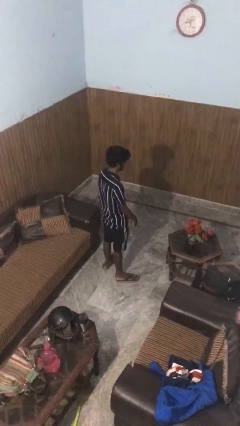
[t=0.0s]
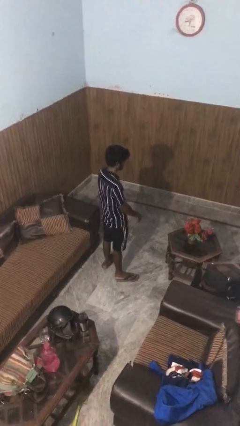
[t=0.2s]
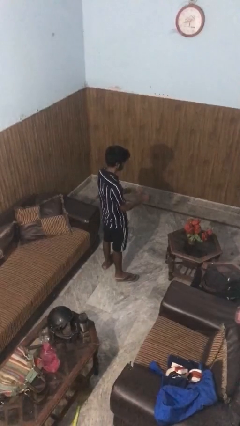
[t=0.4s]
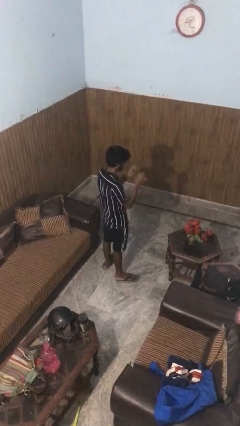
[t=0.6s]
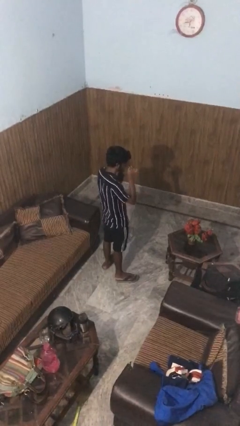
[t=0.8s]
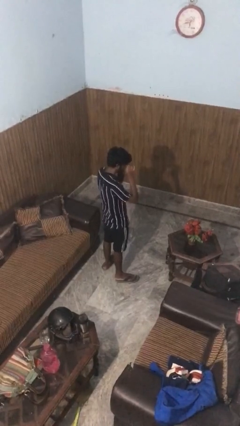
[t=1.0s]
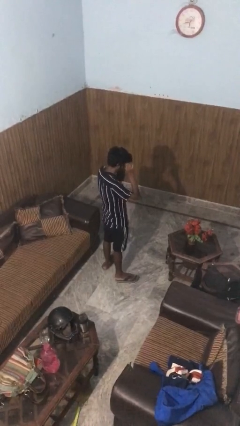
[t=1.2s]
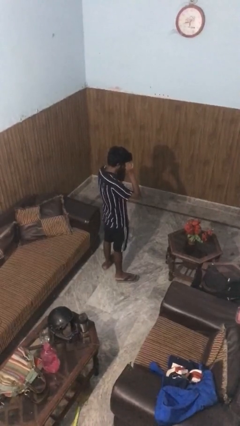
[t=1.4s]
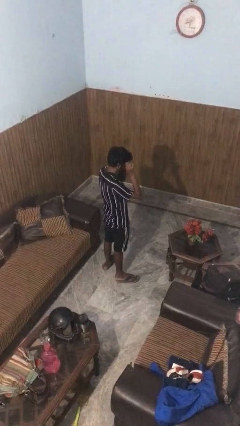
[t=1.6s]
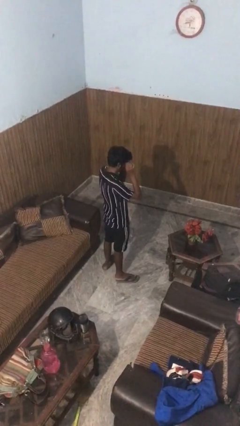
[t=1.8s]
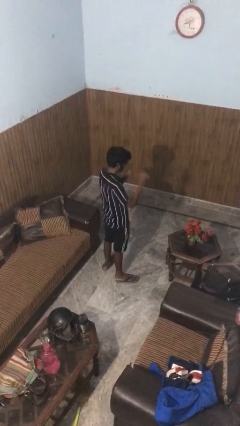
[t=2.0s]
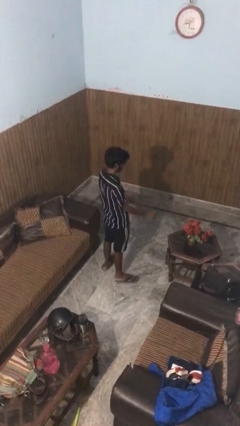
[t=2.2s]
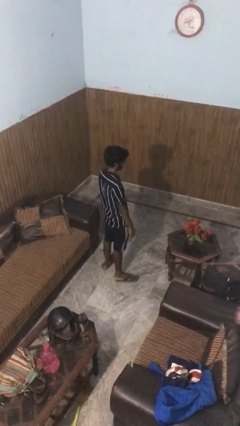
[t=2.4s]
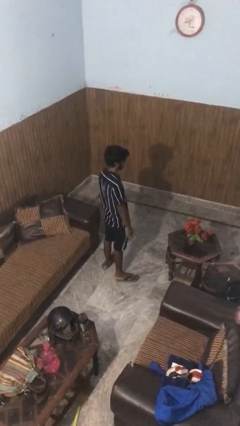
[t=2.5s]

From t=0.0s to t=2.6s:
person puts on glasses

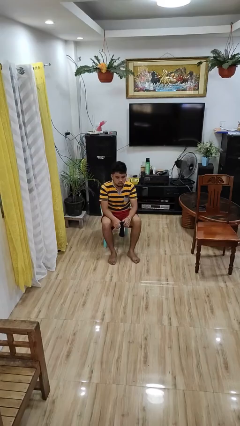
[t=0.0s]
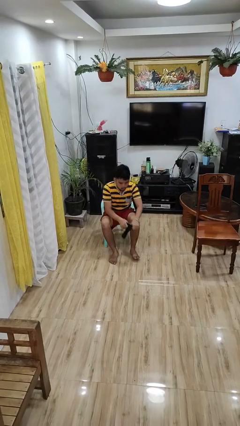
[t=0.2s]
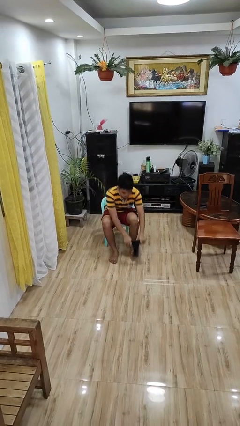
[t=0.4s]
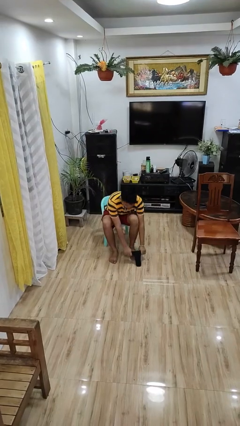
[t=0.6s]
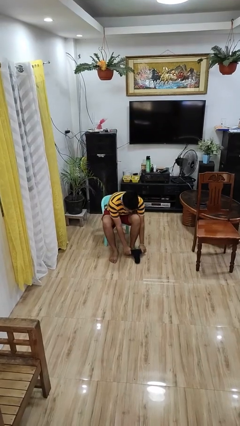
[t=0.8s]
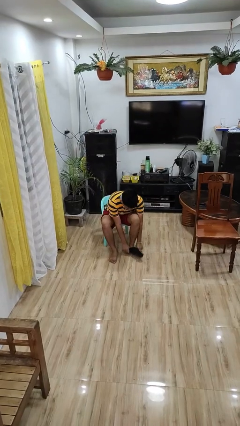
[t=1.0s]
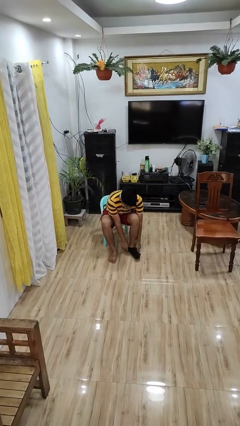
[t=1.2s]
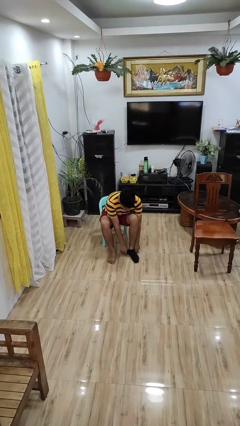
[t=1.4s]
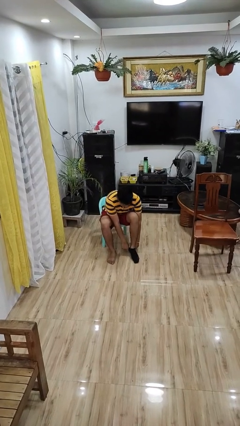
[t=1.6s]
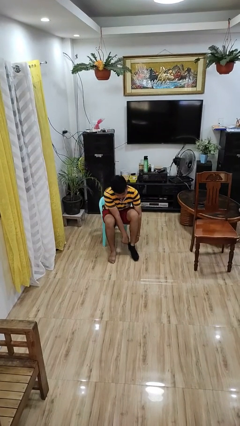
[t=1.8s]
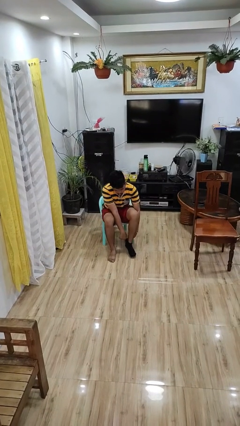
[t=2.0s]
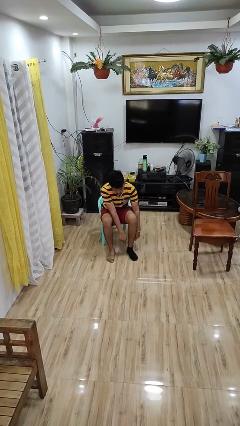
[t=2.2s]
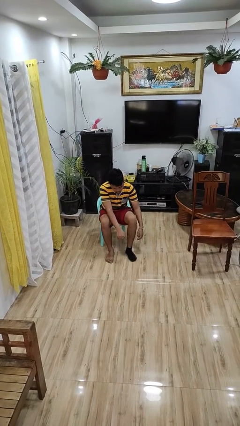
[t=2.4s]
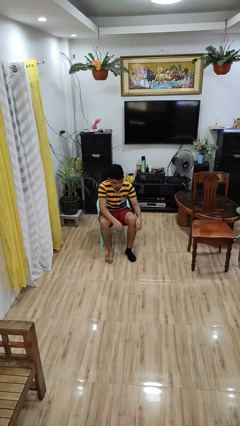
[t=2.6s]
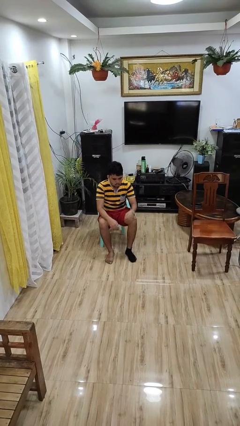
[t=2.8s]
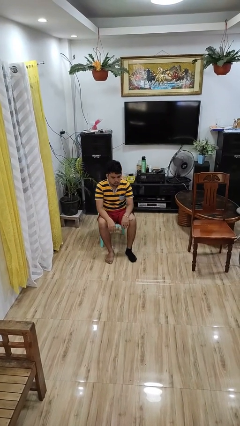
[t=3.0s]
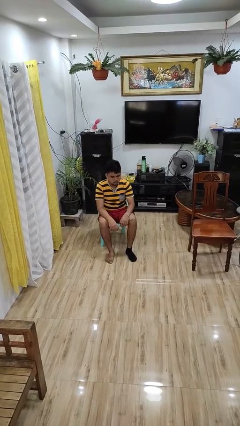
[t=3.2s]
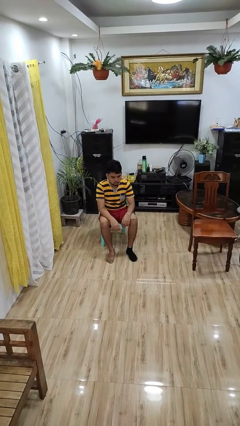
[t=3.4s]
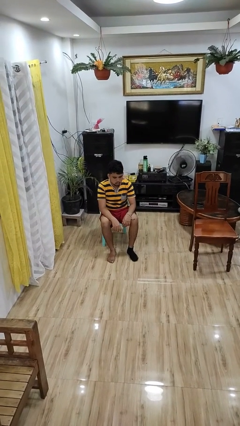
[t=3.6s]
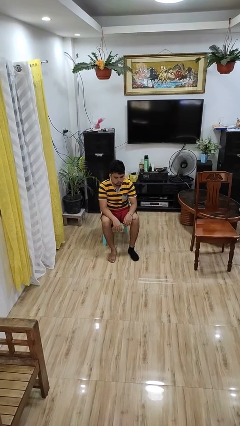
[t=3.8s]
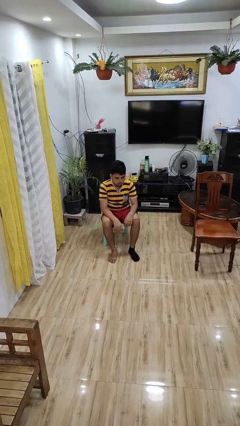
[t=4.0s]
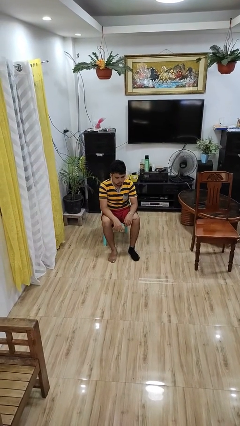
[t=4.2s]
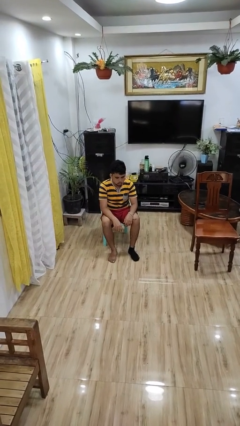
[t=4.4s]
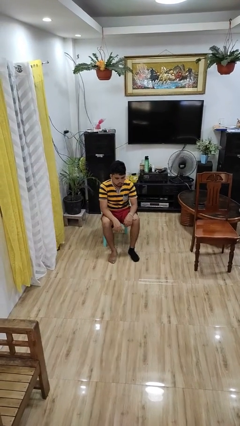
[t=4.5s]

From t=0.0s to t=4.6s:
person puts on socks

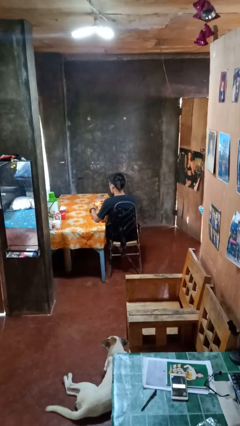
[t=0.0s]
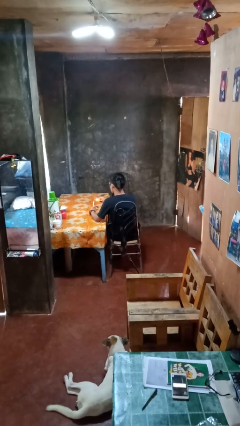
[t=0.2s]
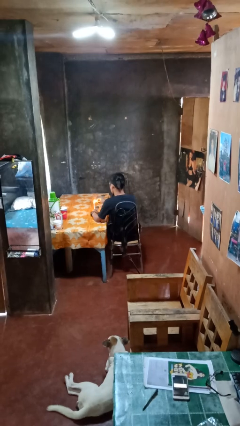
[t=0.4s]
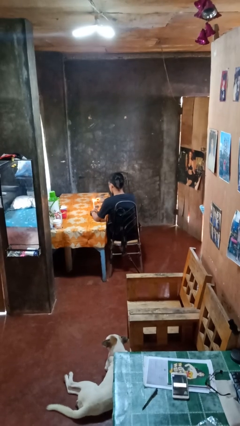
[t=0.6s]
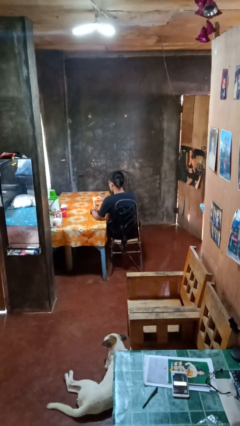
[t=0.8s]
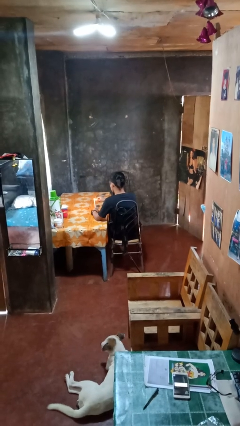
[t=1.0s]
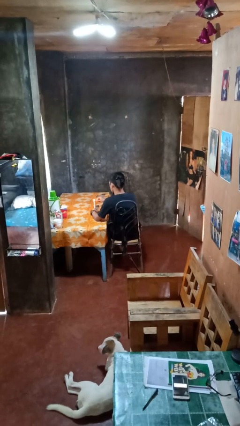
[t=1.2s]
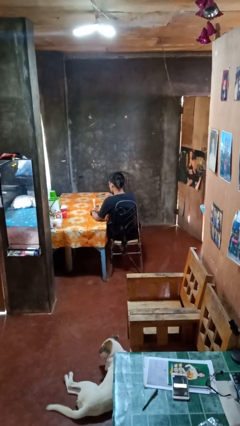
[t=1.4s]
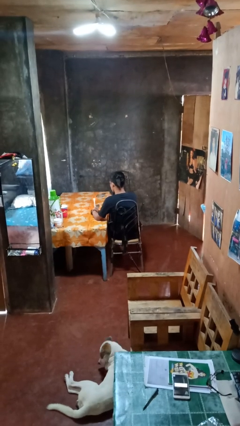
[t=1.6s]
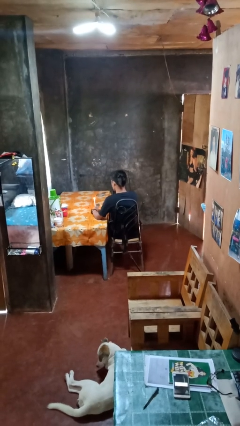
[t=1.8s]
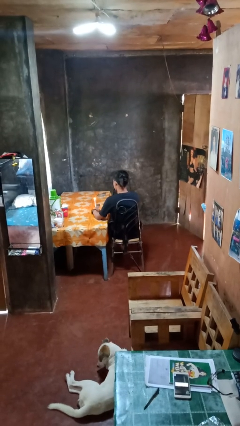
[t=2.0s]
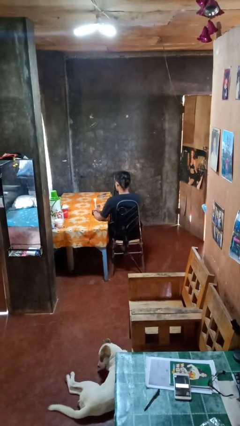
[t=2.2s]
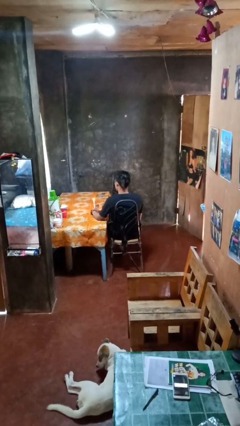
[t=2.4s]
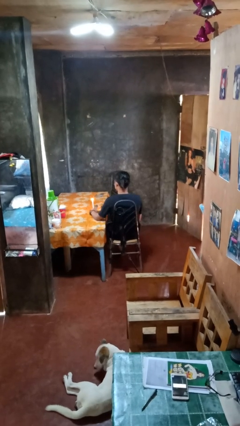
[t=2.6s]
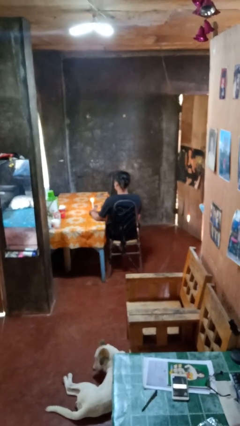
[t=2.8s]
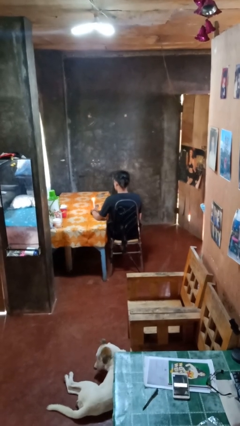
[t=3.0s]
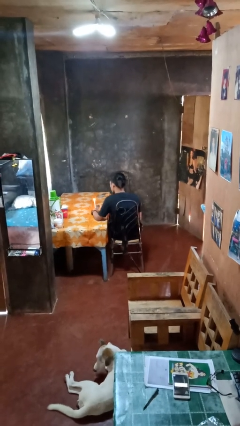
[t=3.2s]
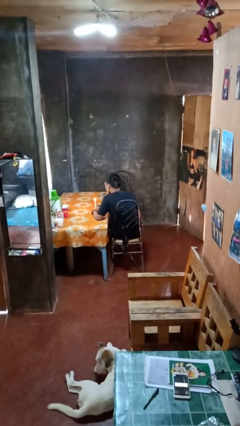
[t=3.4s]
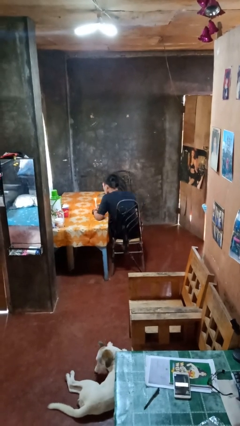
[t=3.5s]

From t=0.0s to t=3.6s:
person lights candle

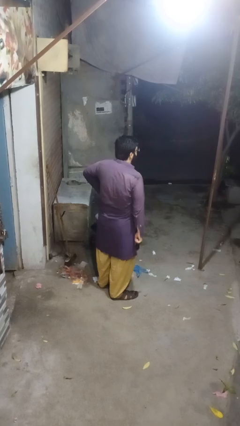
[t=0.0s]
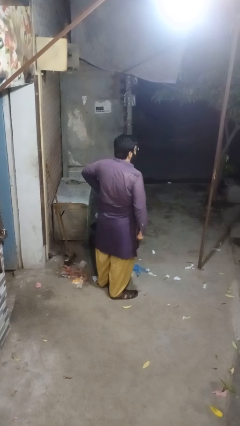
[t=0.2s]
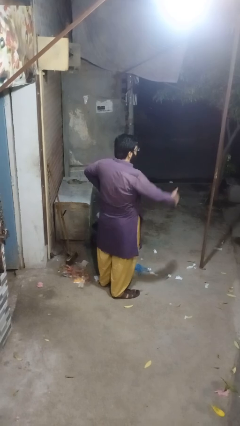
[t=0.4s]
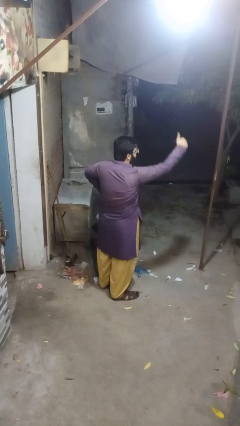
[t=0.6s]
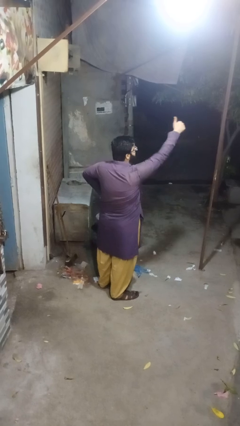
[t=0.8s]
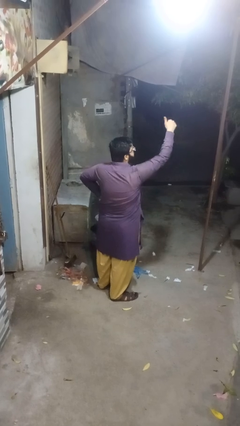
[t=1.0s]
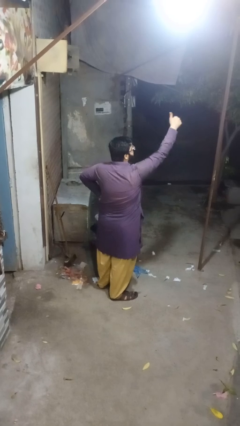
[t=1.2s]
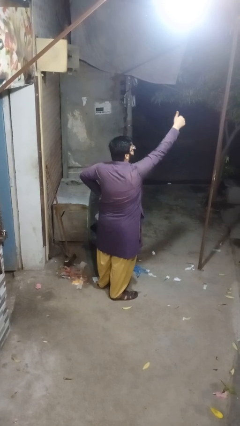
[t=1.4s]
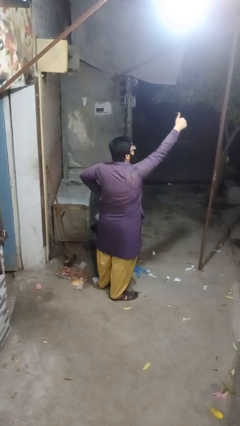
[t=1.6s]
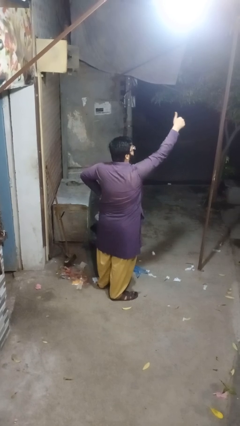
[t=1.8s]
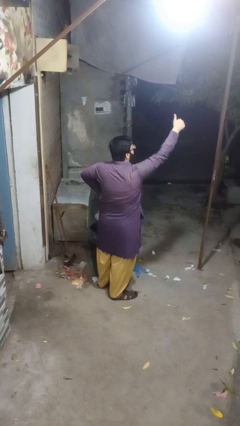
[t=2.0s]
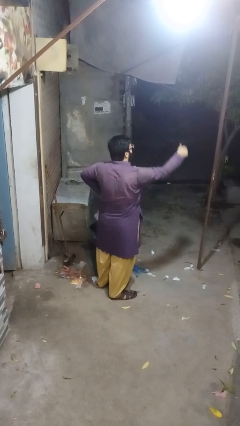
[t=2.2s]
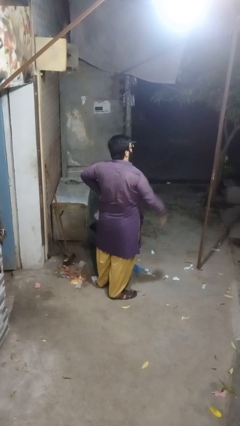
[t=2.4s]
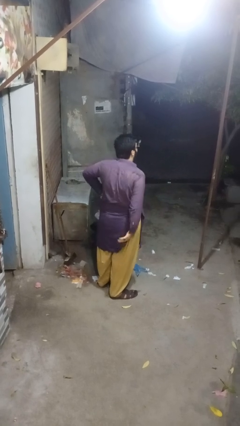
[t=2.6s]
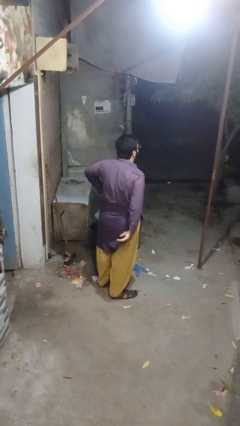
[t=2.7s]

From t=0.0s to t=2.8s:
person gestures thumbs up

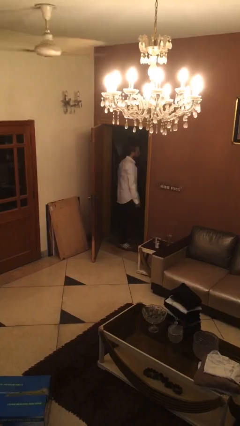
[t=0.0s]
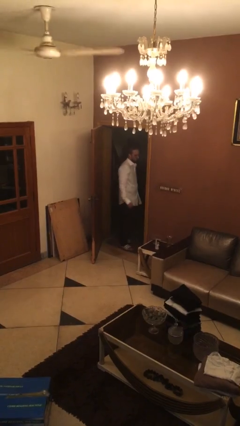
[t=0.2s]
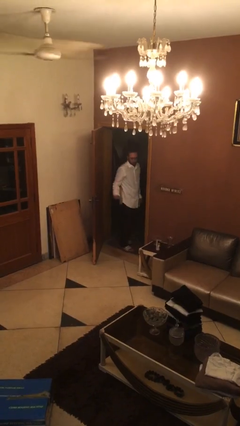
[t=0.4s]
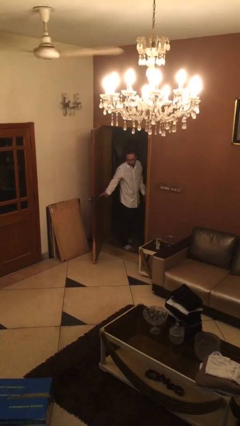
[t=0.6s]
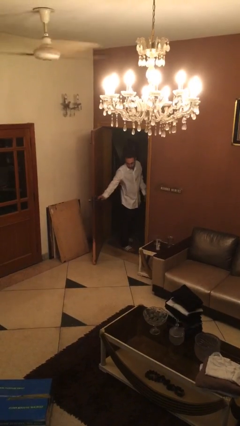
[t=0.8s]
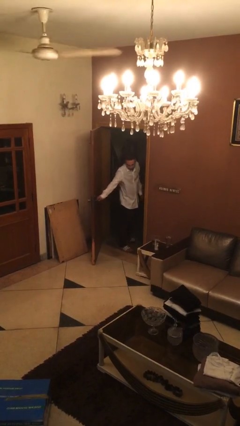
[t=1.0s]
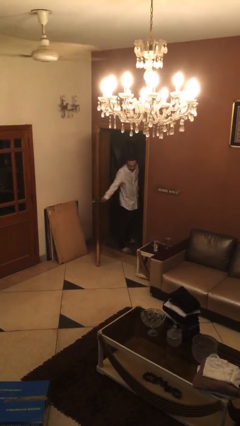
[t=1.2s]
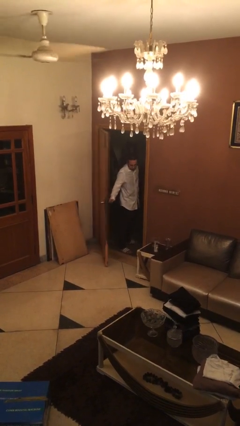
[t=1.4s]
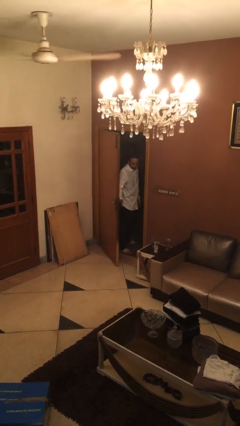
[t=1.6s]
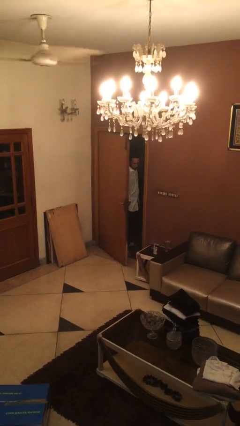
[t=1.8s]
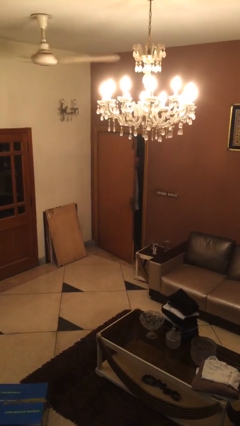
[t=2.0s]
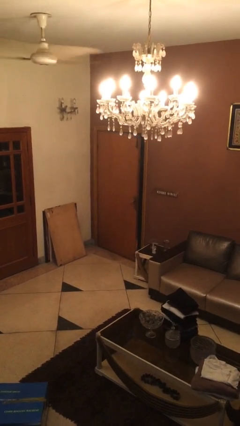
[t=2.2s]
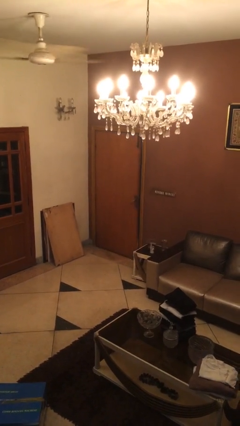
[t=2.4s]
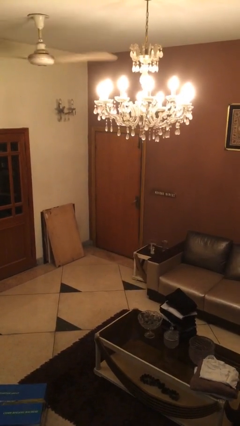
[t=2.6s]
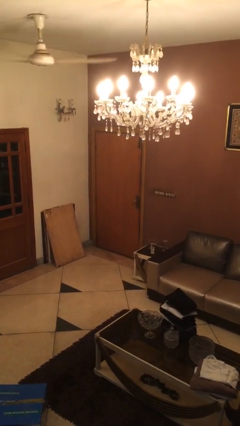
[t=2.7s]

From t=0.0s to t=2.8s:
person closes facility door

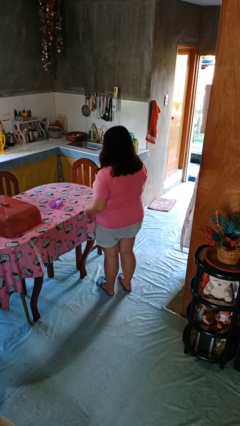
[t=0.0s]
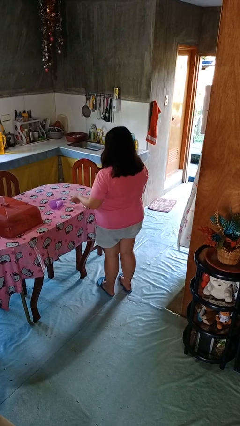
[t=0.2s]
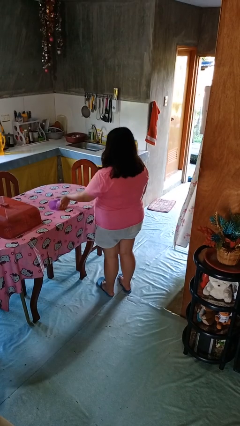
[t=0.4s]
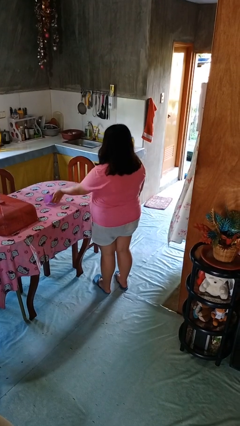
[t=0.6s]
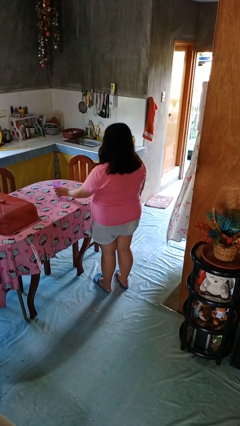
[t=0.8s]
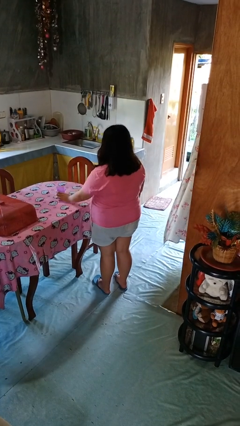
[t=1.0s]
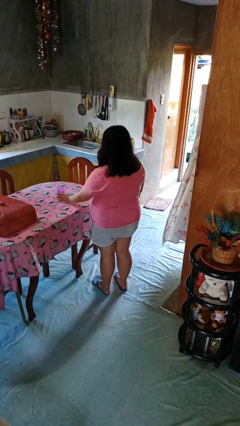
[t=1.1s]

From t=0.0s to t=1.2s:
person sets upright glass
